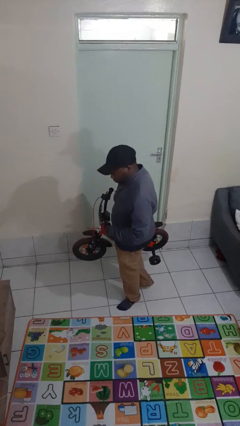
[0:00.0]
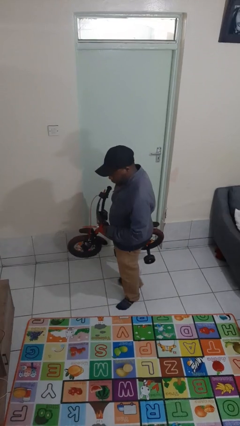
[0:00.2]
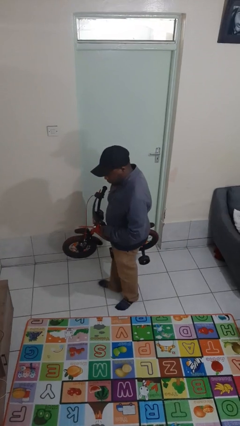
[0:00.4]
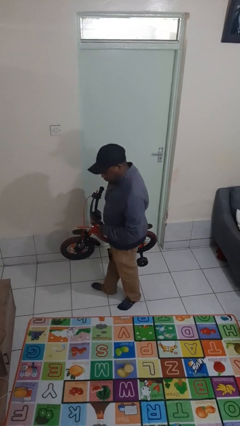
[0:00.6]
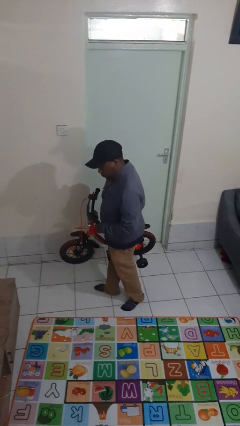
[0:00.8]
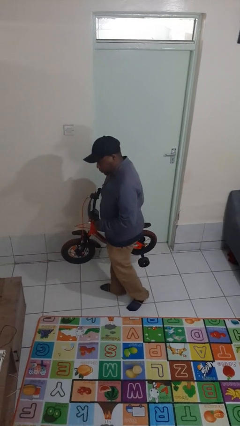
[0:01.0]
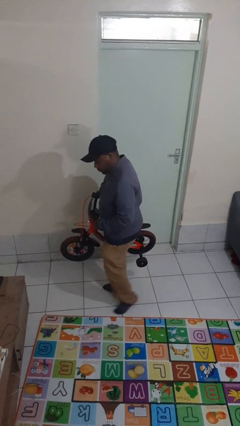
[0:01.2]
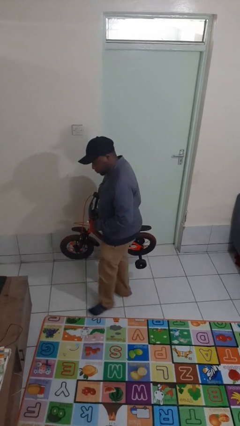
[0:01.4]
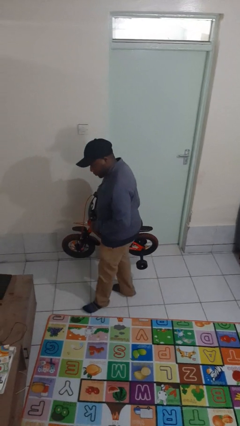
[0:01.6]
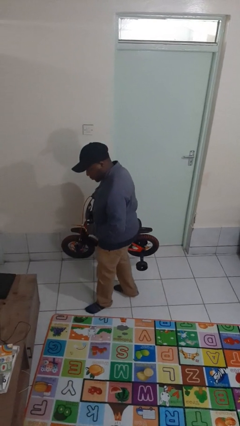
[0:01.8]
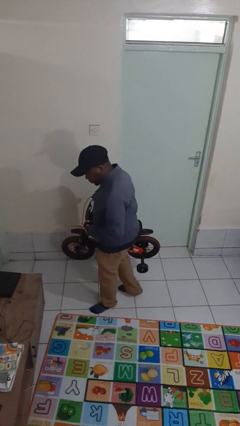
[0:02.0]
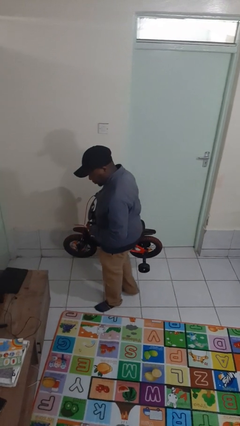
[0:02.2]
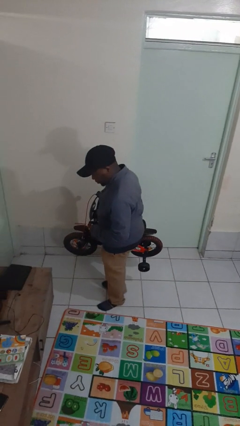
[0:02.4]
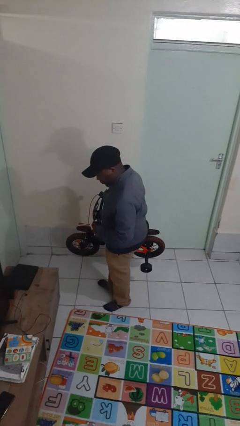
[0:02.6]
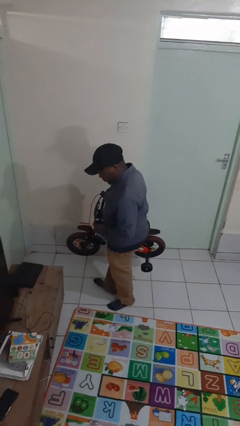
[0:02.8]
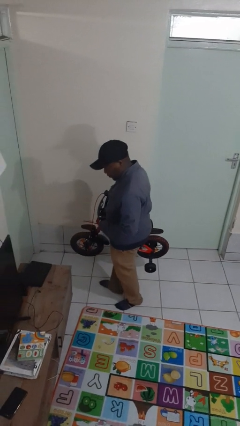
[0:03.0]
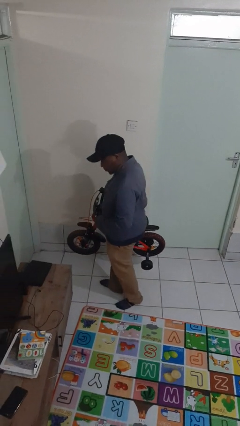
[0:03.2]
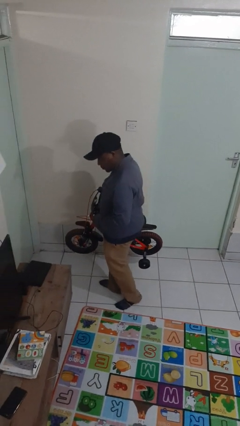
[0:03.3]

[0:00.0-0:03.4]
person carries bicycle

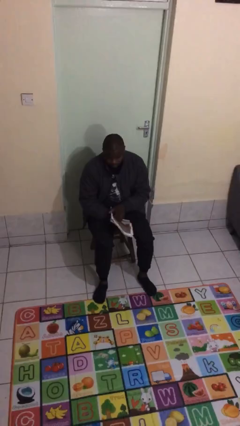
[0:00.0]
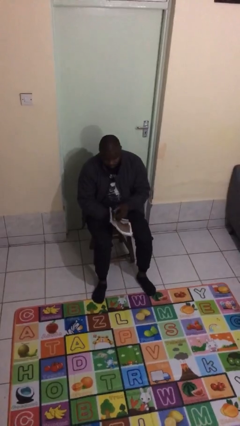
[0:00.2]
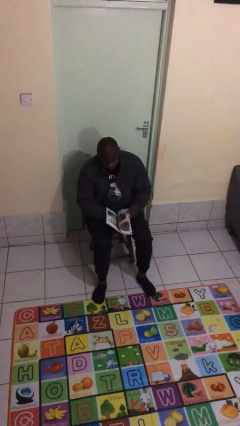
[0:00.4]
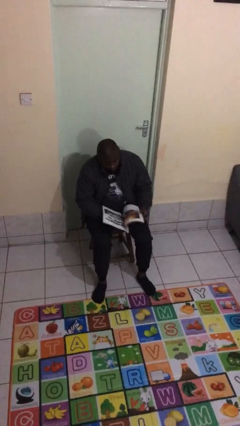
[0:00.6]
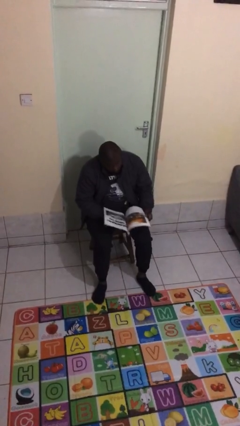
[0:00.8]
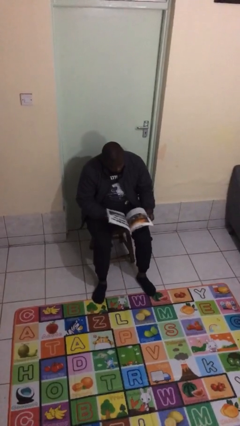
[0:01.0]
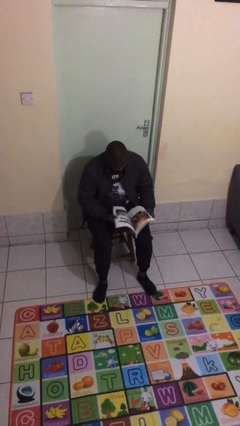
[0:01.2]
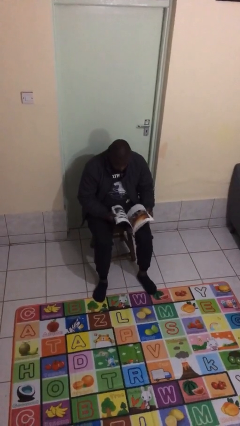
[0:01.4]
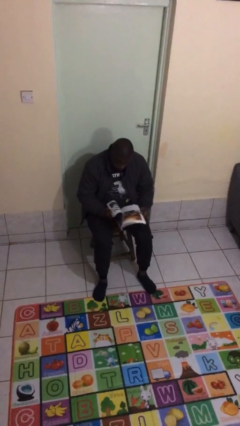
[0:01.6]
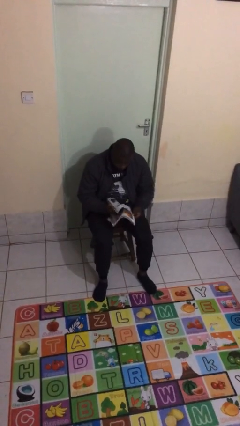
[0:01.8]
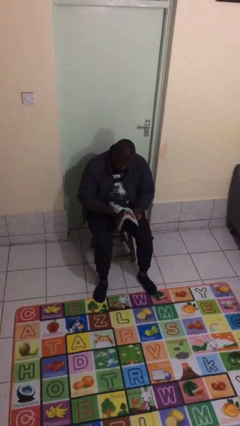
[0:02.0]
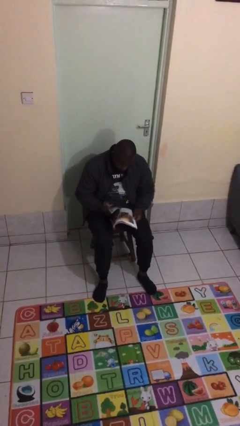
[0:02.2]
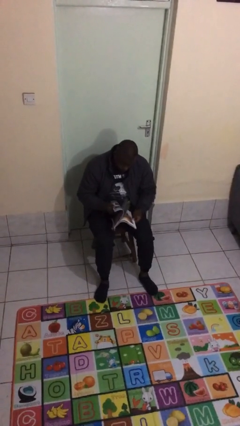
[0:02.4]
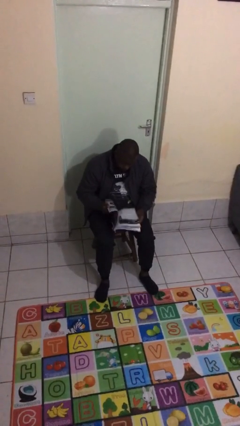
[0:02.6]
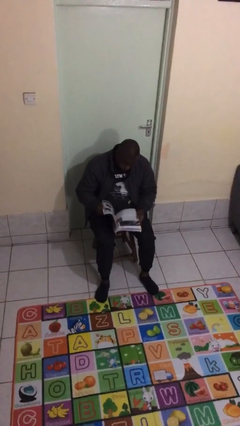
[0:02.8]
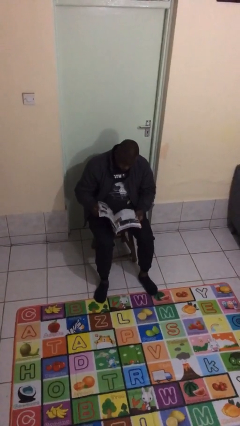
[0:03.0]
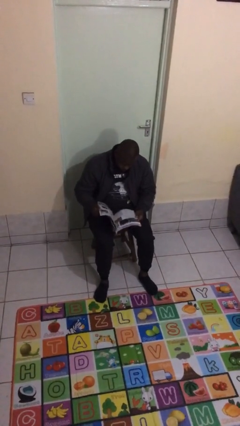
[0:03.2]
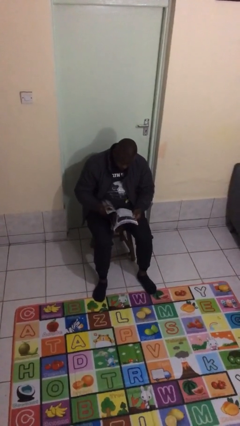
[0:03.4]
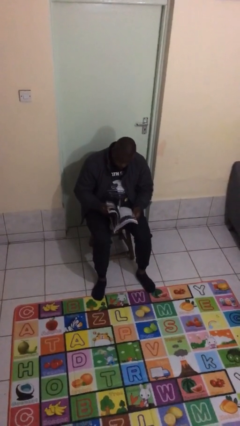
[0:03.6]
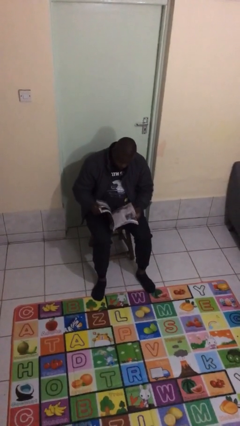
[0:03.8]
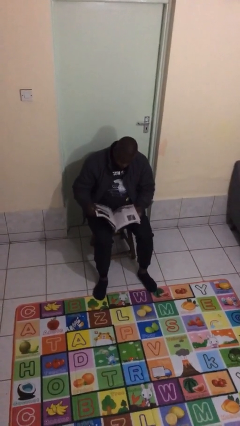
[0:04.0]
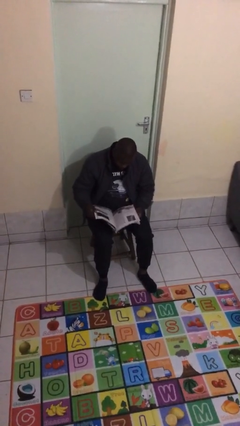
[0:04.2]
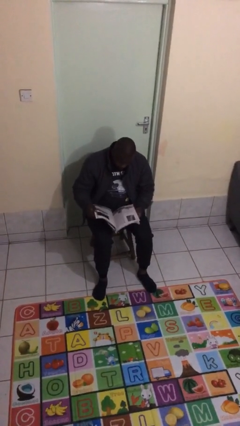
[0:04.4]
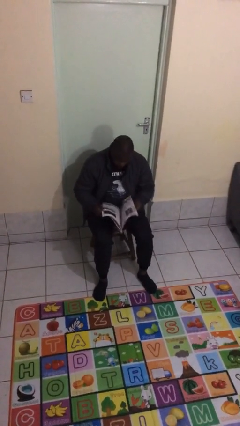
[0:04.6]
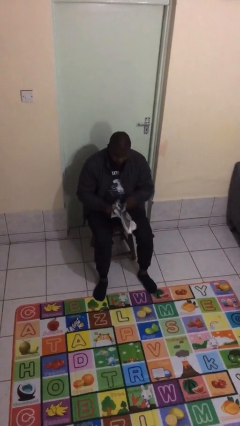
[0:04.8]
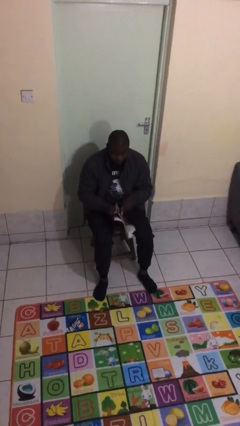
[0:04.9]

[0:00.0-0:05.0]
person reads magazine

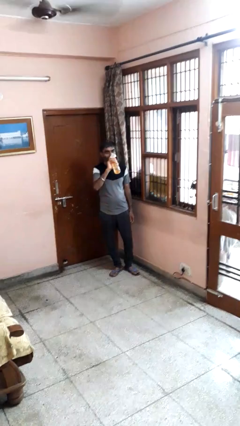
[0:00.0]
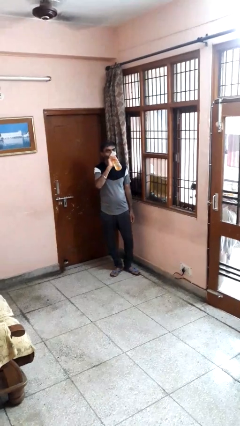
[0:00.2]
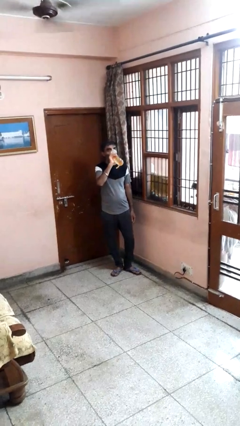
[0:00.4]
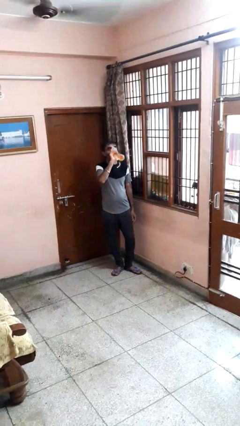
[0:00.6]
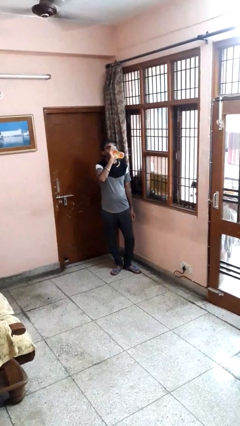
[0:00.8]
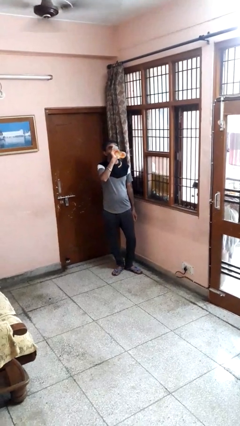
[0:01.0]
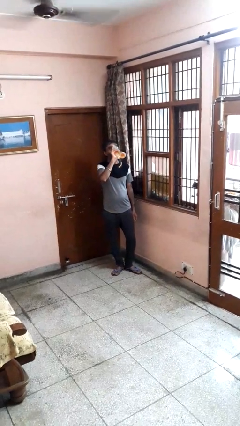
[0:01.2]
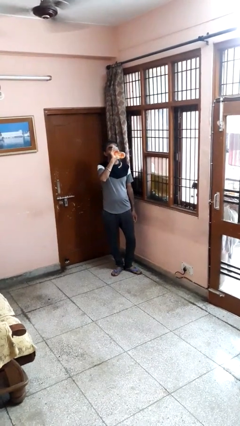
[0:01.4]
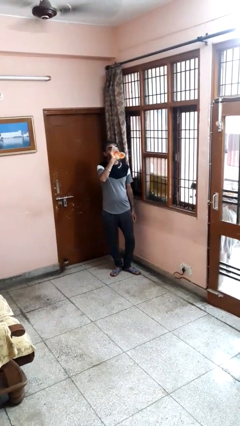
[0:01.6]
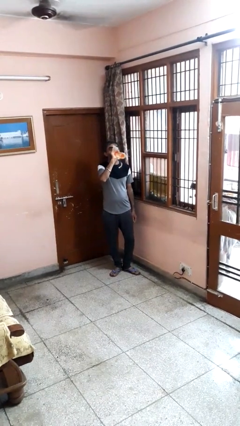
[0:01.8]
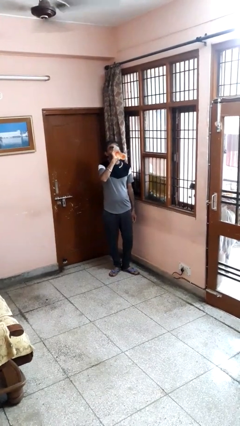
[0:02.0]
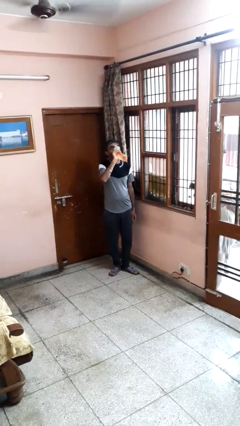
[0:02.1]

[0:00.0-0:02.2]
person drinks from bottle

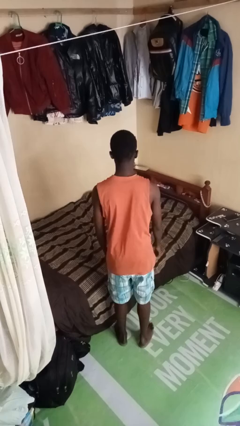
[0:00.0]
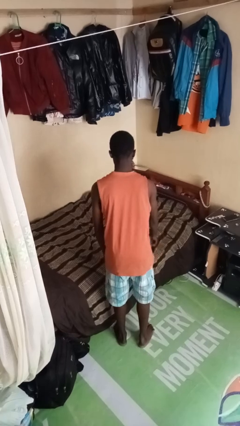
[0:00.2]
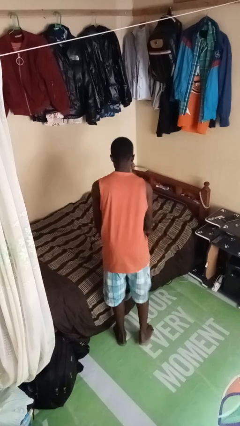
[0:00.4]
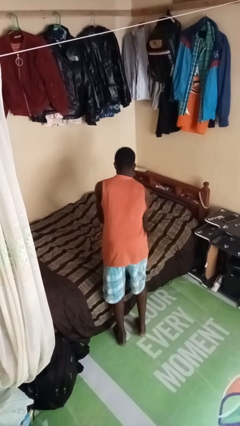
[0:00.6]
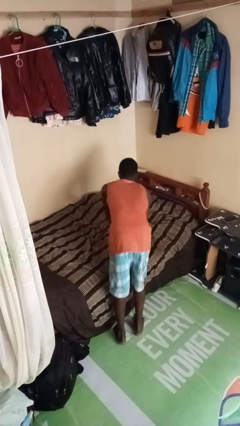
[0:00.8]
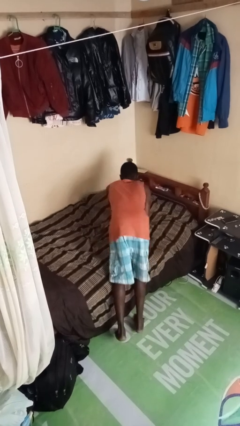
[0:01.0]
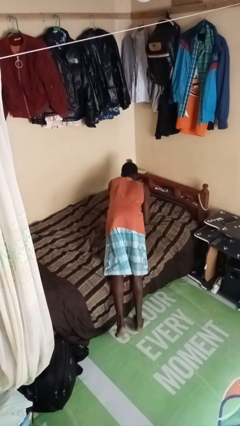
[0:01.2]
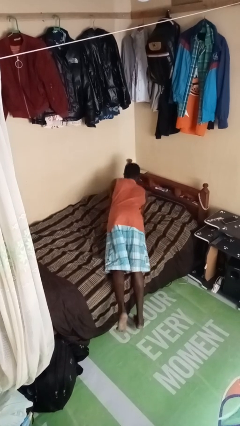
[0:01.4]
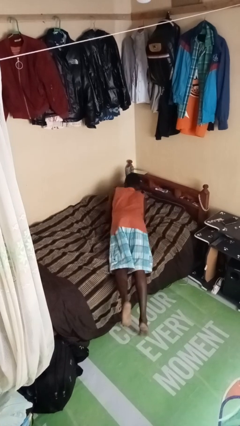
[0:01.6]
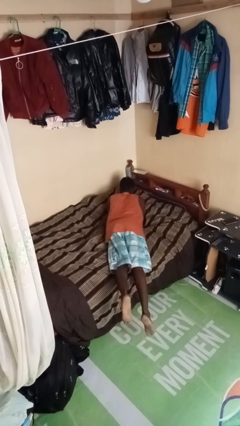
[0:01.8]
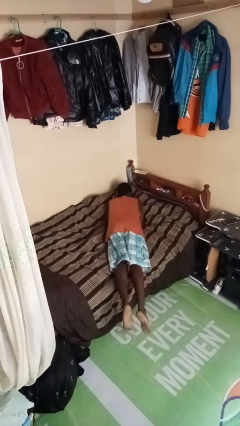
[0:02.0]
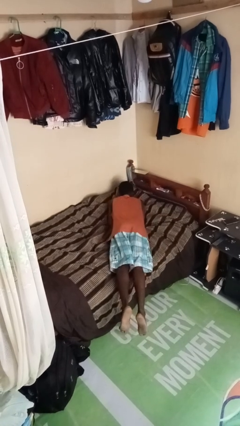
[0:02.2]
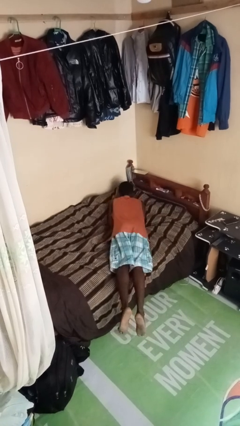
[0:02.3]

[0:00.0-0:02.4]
person lies down on bed

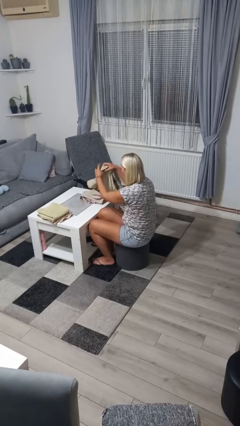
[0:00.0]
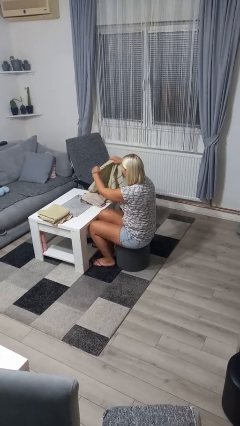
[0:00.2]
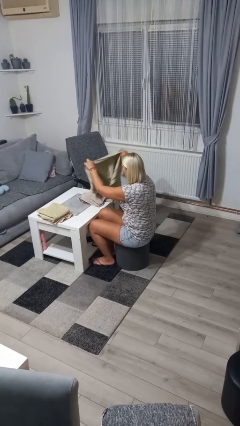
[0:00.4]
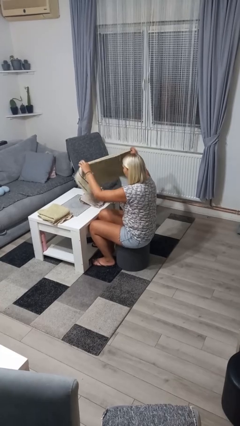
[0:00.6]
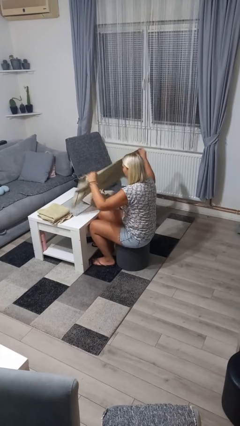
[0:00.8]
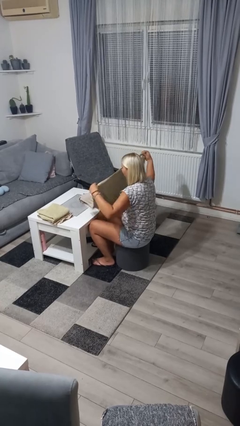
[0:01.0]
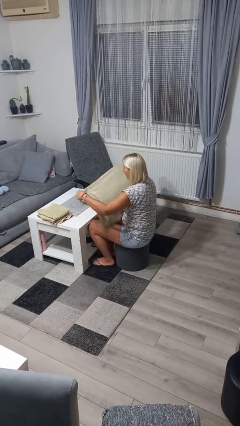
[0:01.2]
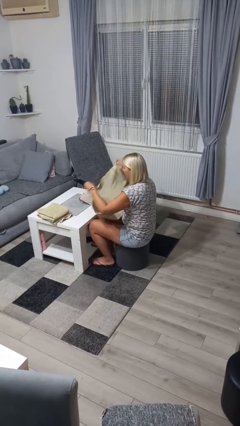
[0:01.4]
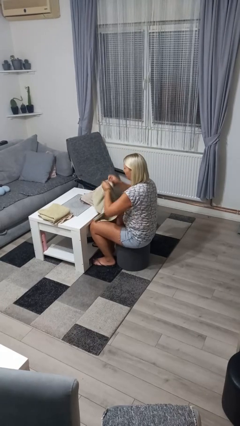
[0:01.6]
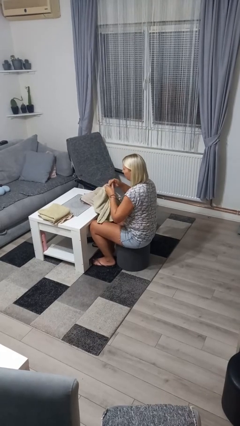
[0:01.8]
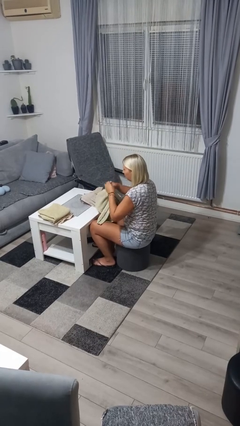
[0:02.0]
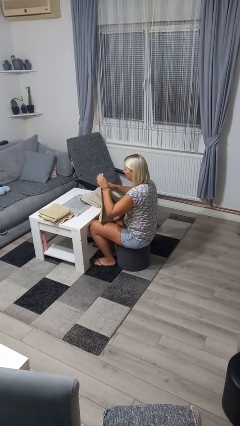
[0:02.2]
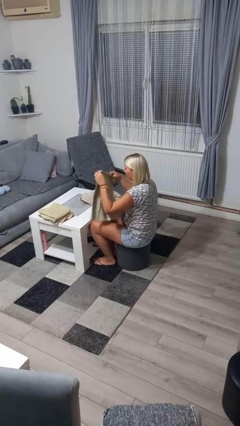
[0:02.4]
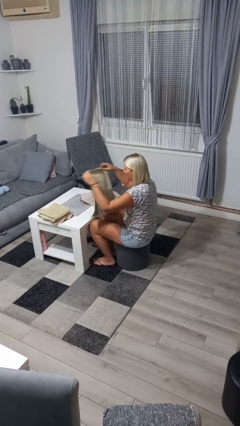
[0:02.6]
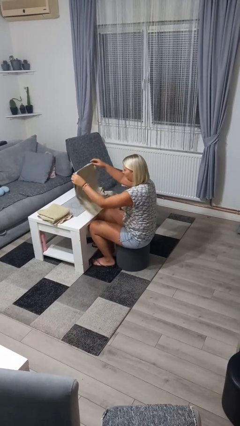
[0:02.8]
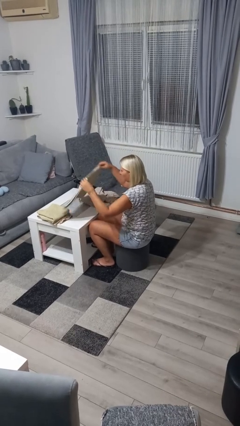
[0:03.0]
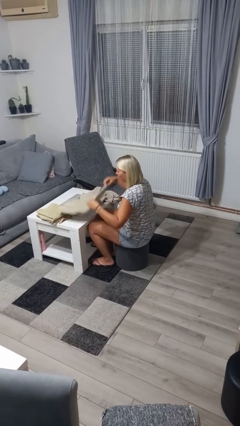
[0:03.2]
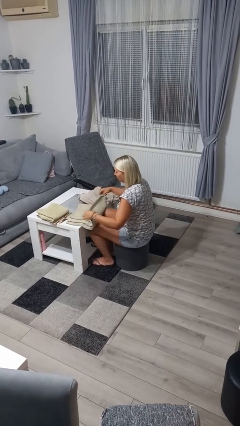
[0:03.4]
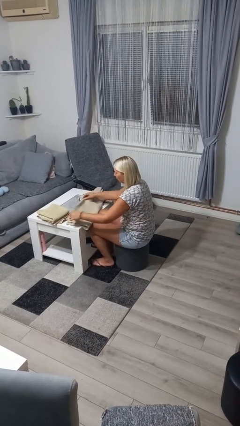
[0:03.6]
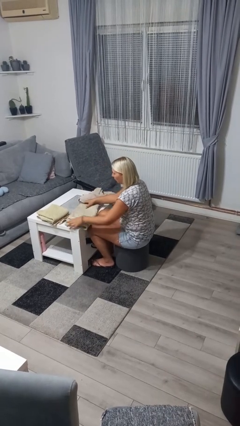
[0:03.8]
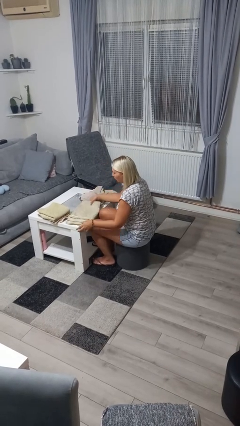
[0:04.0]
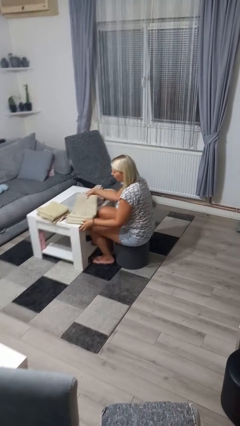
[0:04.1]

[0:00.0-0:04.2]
person folds towel

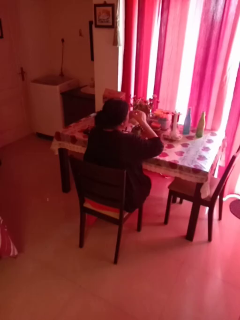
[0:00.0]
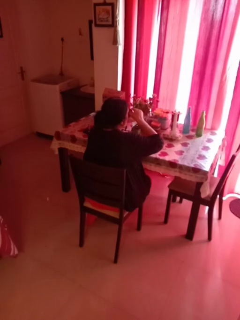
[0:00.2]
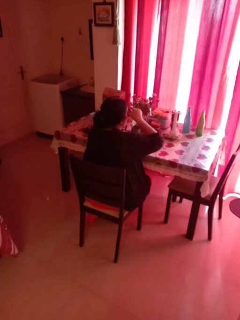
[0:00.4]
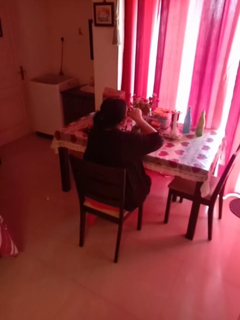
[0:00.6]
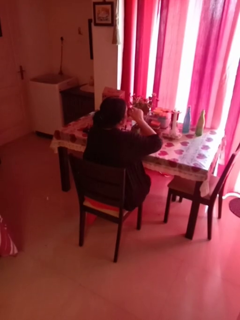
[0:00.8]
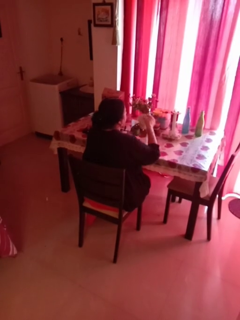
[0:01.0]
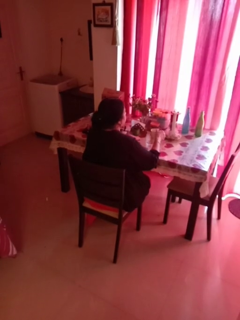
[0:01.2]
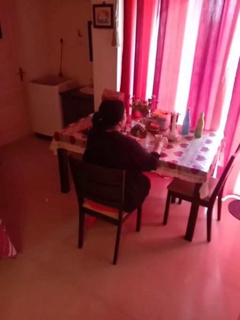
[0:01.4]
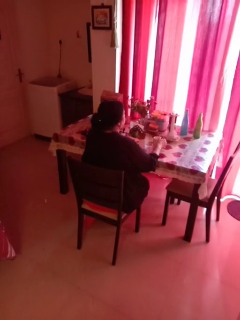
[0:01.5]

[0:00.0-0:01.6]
person drinks from mug
